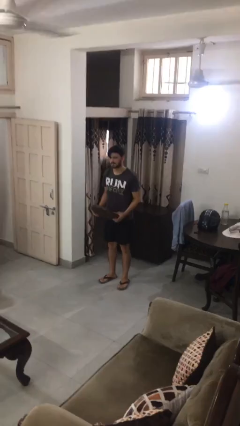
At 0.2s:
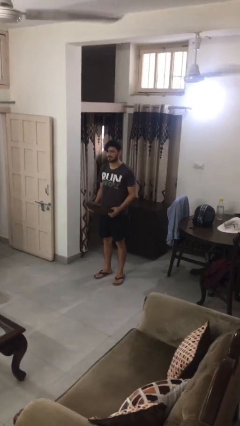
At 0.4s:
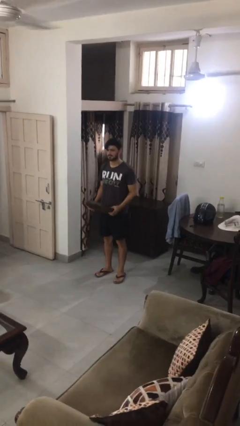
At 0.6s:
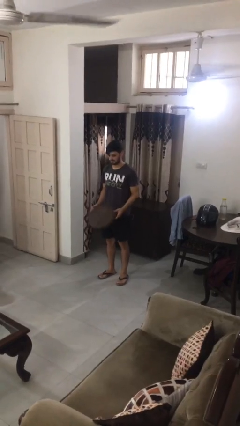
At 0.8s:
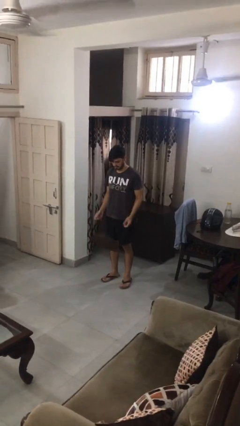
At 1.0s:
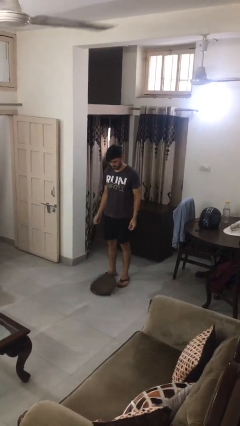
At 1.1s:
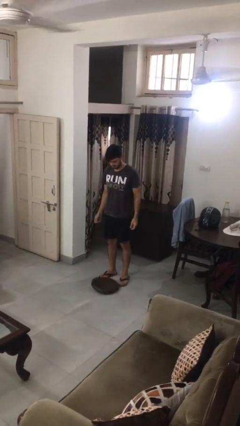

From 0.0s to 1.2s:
person drops object

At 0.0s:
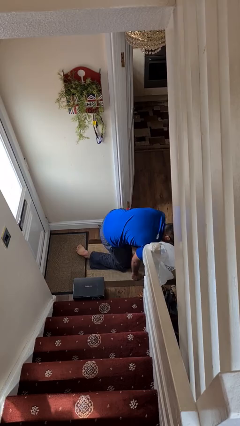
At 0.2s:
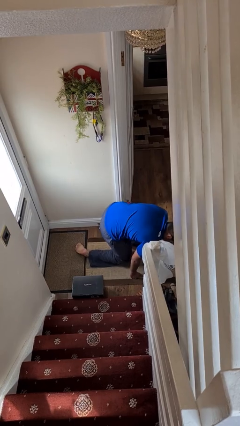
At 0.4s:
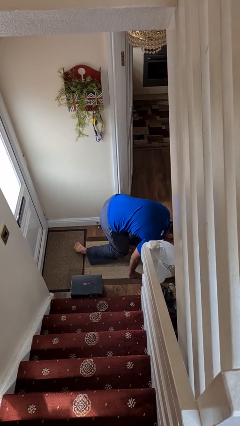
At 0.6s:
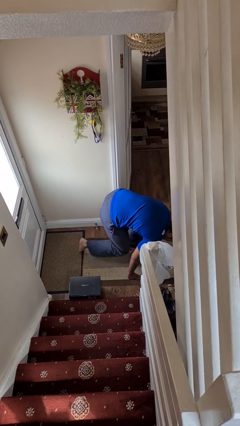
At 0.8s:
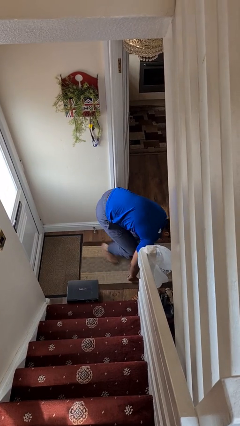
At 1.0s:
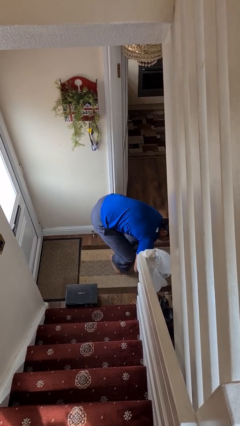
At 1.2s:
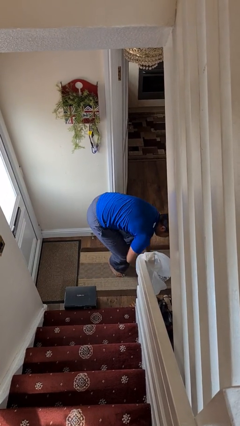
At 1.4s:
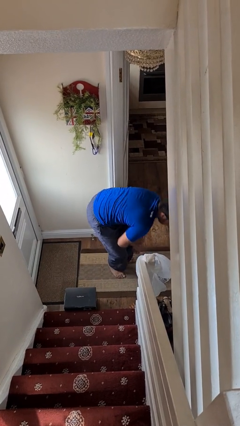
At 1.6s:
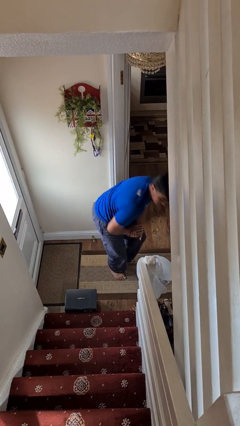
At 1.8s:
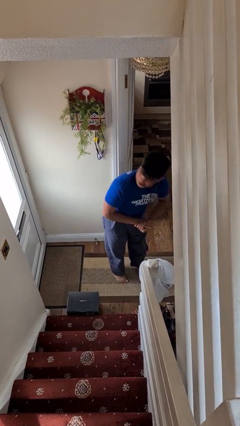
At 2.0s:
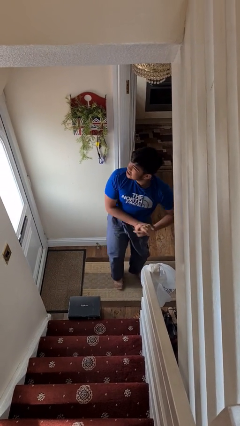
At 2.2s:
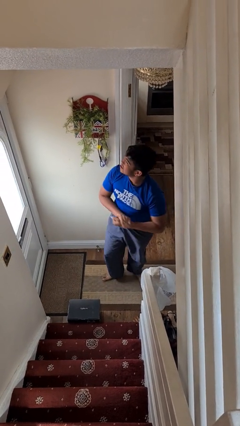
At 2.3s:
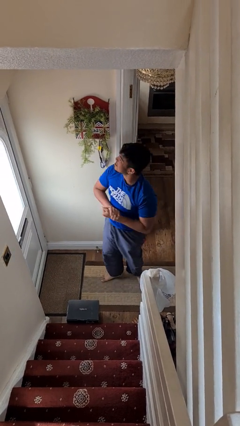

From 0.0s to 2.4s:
person stands up from floor

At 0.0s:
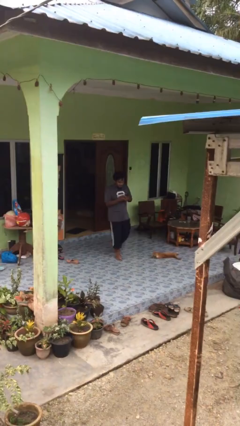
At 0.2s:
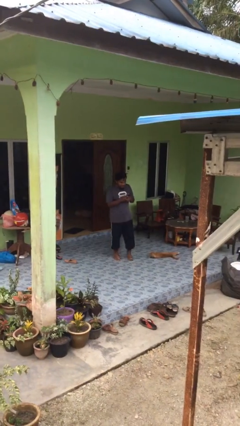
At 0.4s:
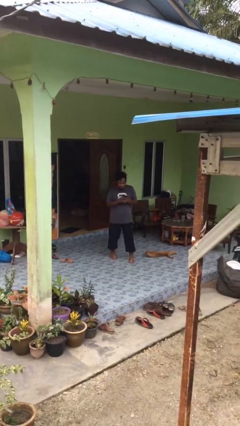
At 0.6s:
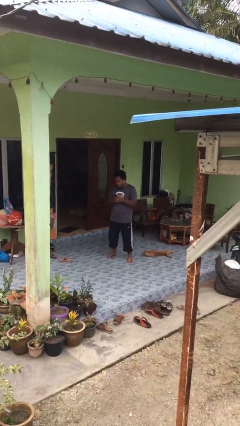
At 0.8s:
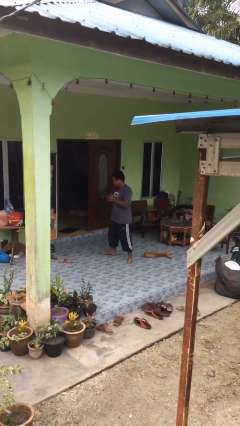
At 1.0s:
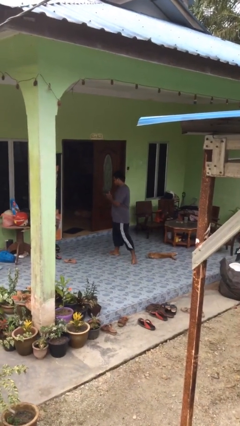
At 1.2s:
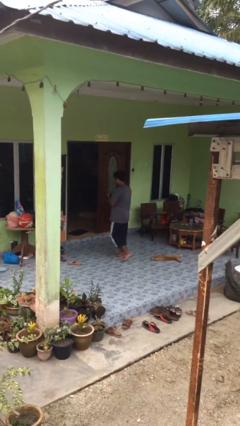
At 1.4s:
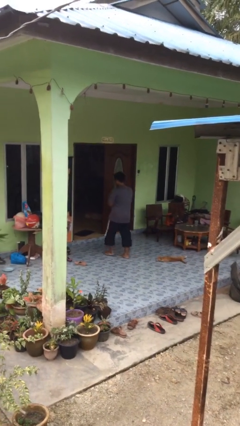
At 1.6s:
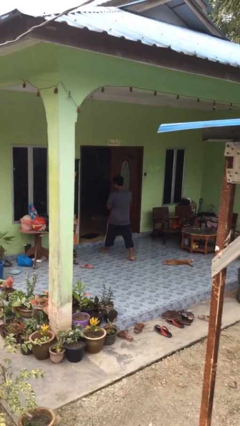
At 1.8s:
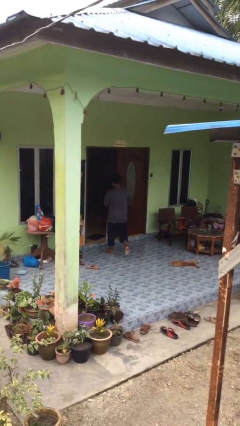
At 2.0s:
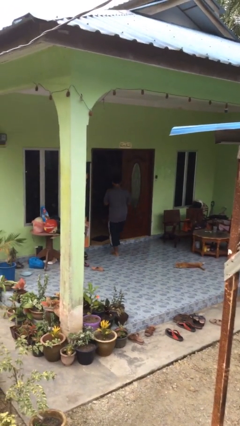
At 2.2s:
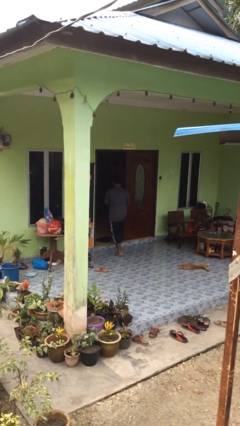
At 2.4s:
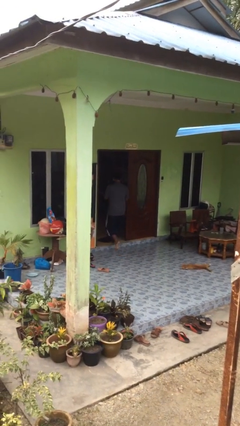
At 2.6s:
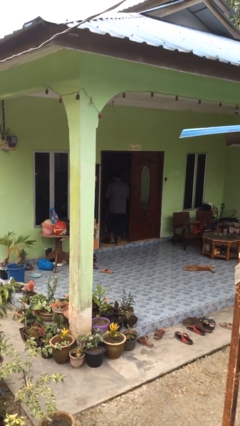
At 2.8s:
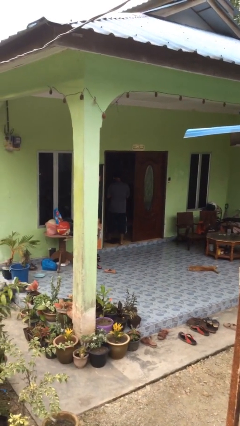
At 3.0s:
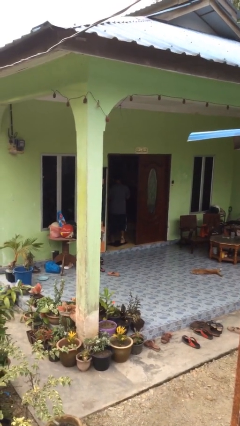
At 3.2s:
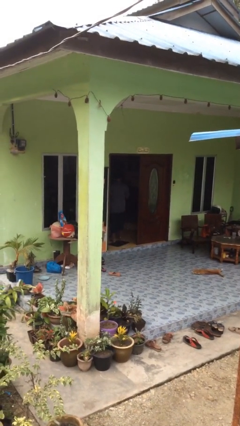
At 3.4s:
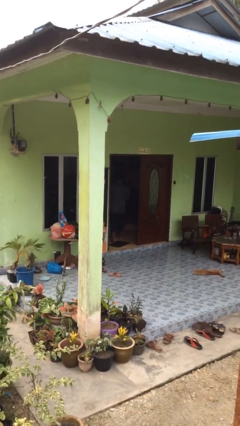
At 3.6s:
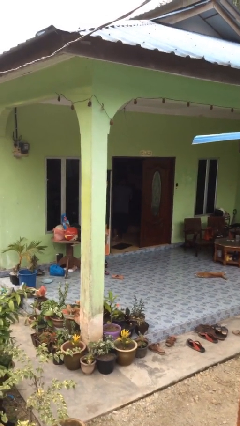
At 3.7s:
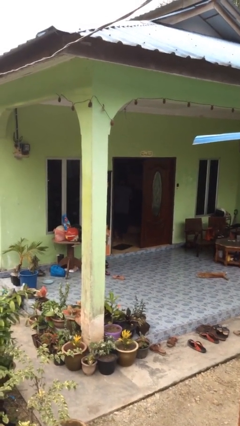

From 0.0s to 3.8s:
person exits scene through structure

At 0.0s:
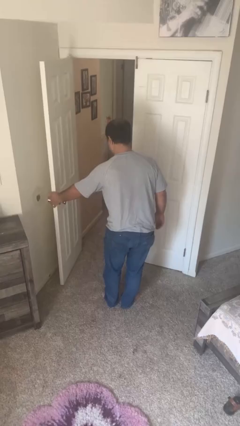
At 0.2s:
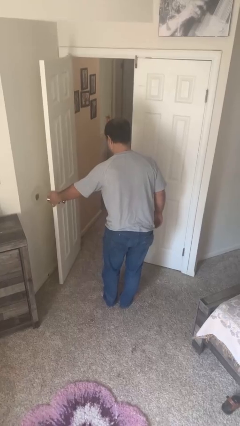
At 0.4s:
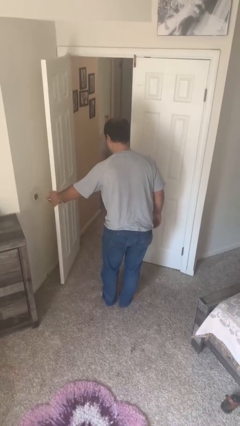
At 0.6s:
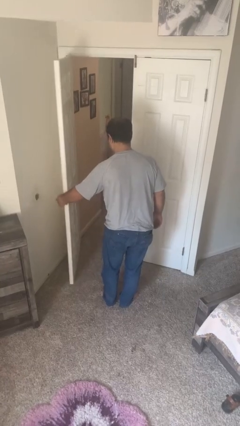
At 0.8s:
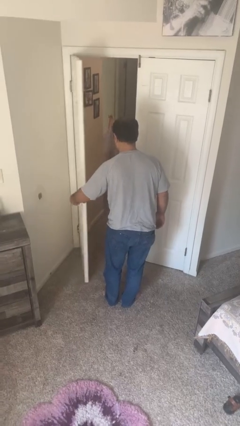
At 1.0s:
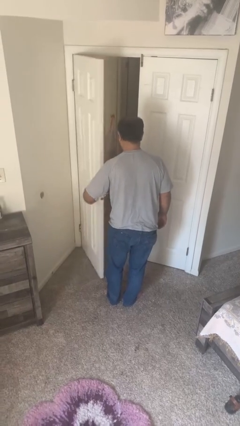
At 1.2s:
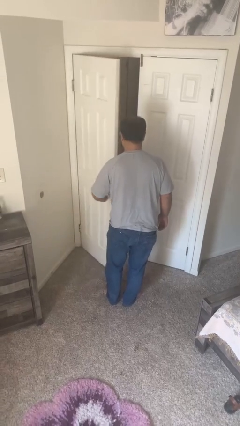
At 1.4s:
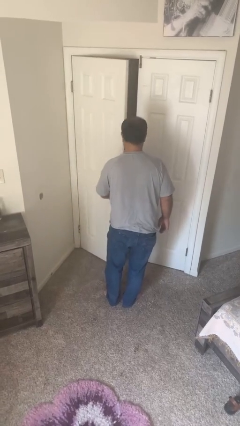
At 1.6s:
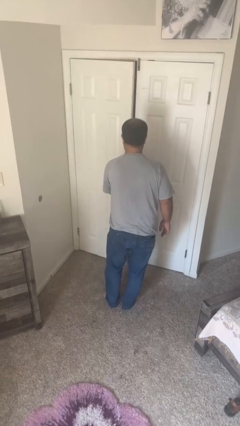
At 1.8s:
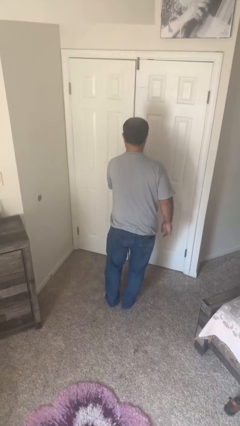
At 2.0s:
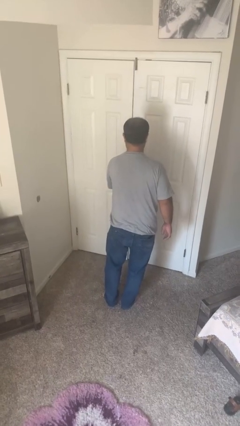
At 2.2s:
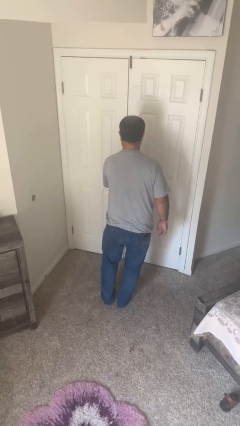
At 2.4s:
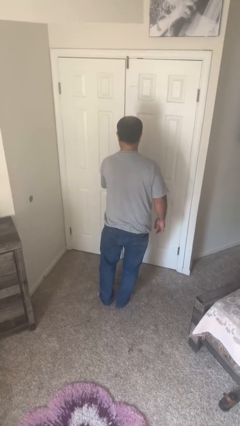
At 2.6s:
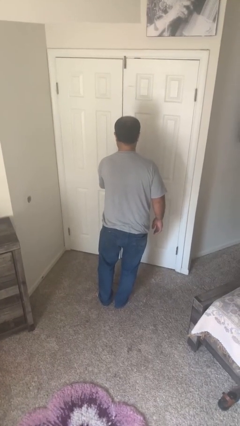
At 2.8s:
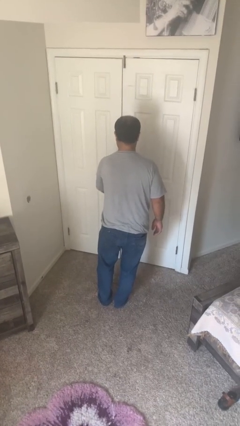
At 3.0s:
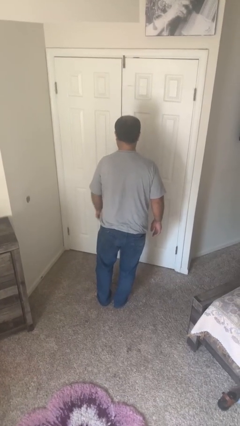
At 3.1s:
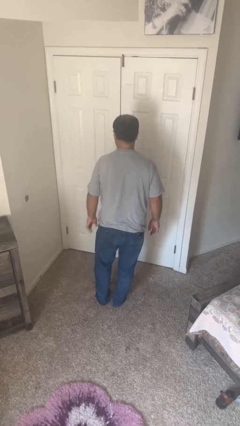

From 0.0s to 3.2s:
person closes facility door

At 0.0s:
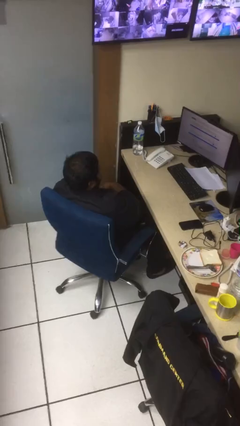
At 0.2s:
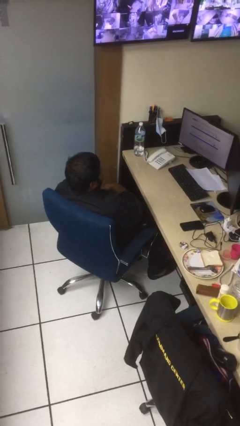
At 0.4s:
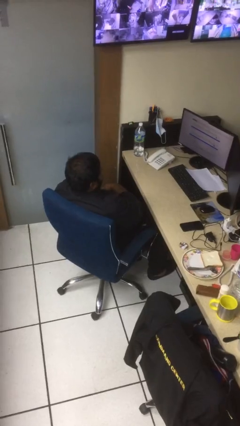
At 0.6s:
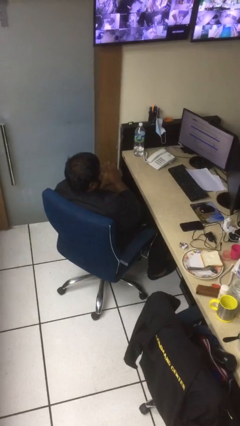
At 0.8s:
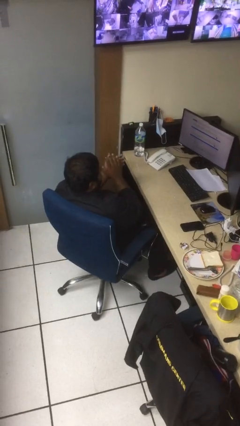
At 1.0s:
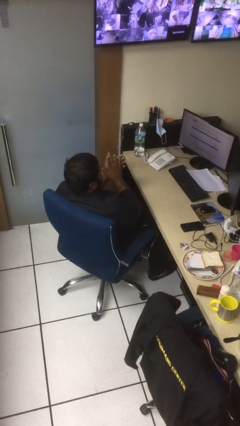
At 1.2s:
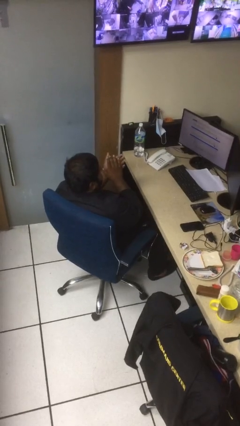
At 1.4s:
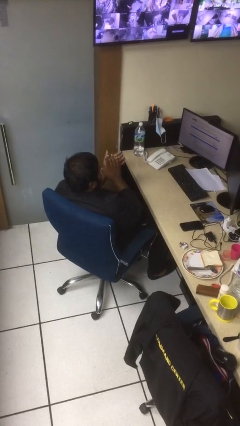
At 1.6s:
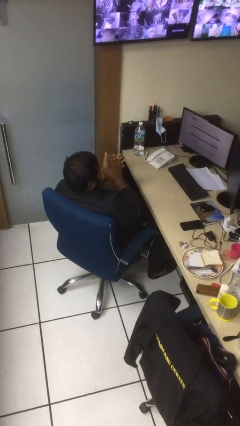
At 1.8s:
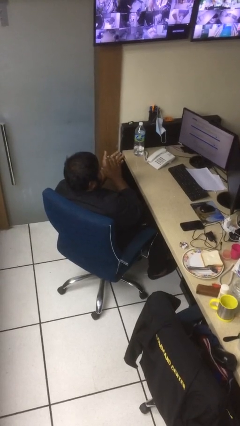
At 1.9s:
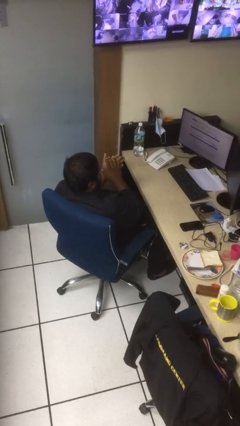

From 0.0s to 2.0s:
person claps hands

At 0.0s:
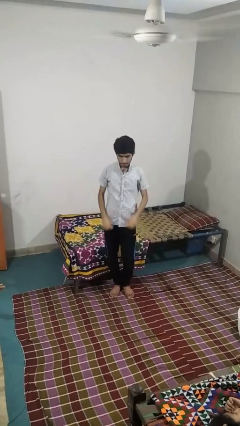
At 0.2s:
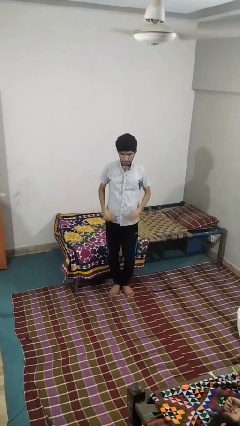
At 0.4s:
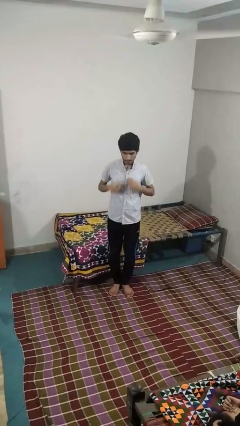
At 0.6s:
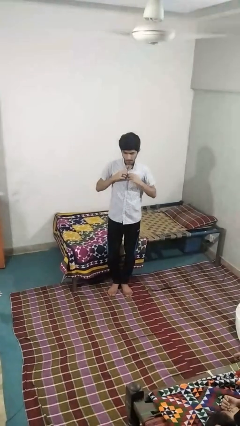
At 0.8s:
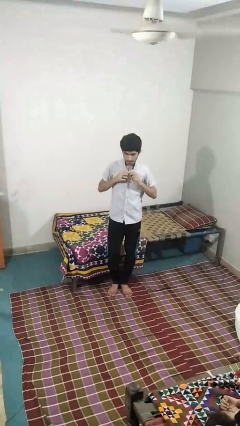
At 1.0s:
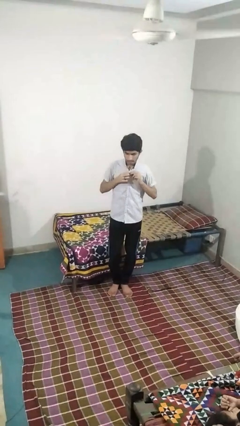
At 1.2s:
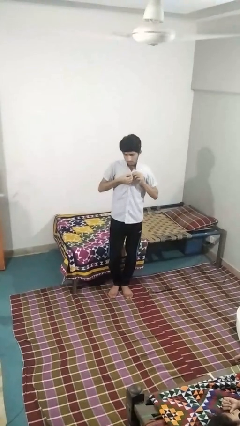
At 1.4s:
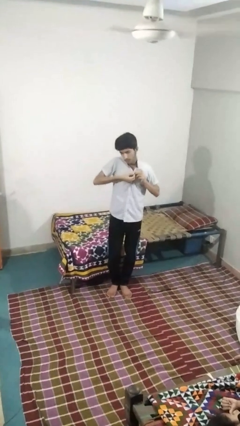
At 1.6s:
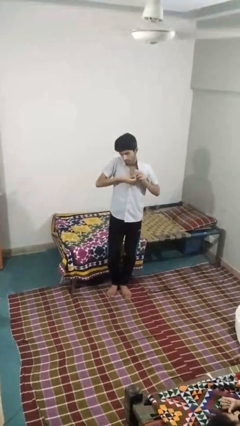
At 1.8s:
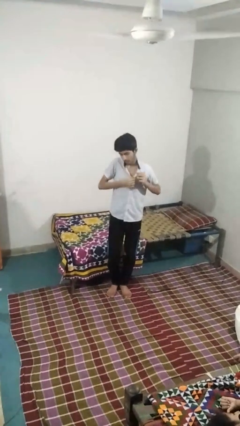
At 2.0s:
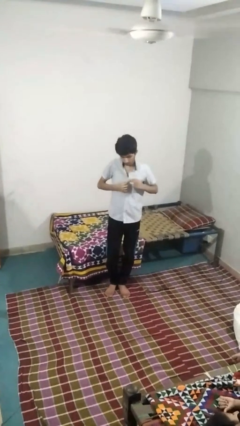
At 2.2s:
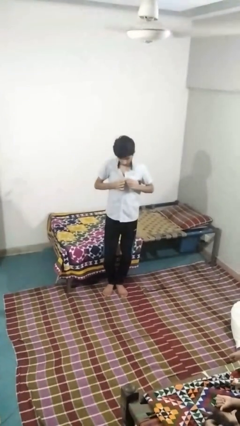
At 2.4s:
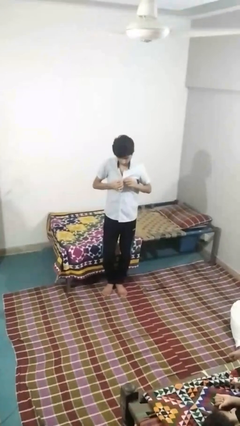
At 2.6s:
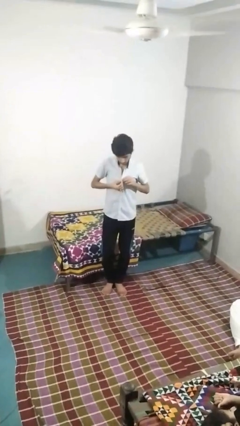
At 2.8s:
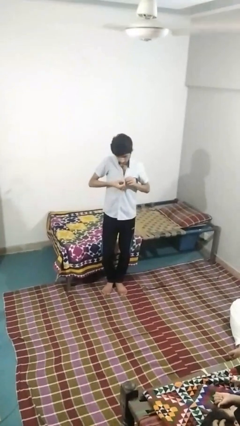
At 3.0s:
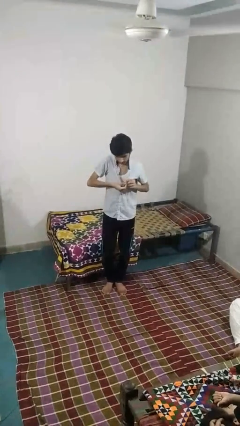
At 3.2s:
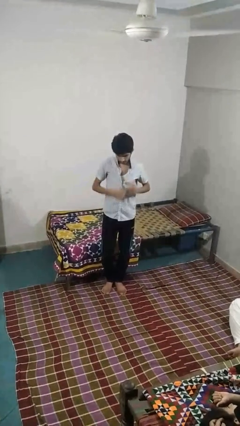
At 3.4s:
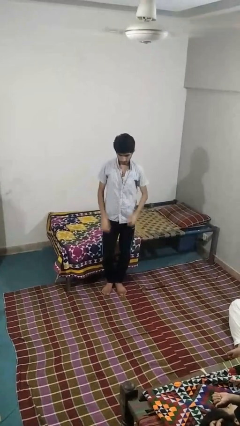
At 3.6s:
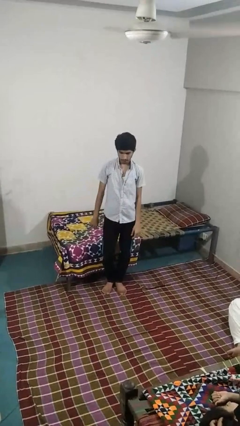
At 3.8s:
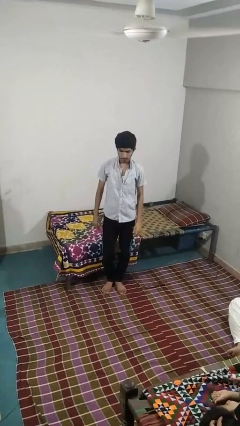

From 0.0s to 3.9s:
person unbuttons shirt

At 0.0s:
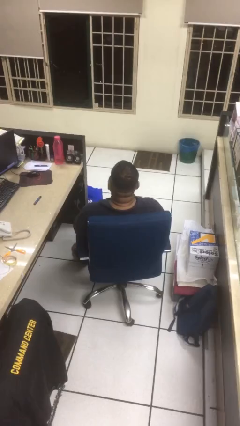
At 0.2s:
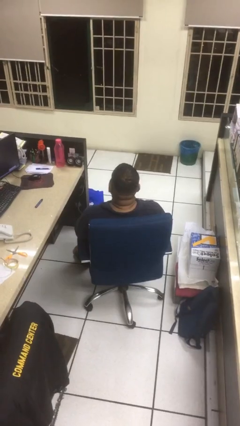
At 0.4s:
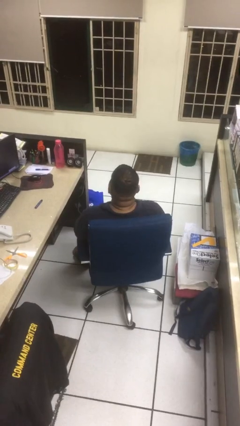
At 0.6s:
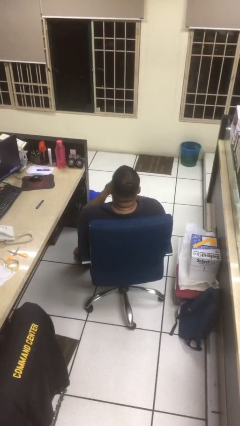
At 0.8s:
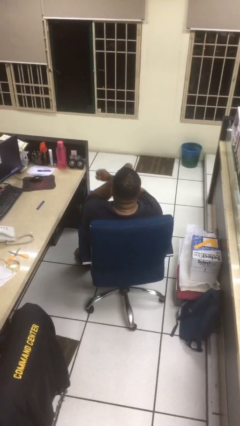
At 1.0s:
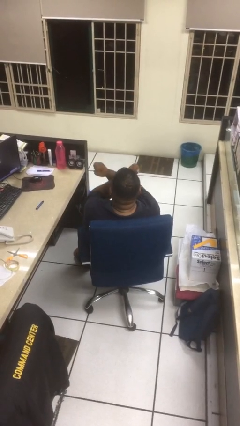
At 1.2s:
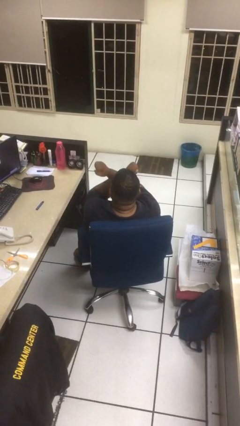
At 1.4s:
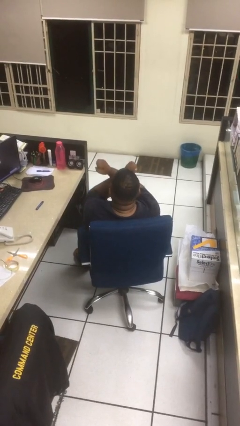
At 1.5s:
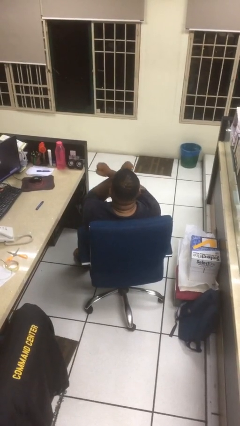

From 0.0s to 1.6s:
person gestures arms x
